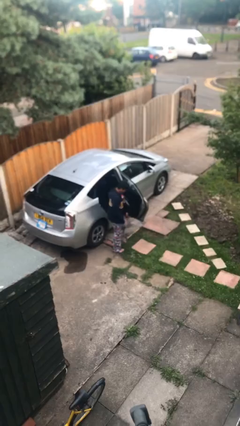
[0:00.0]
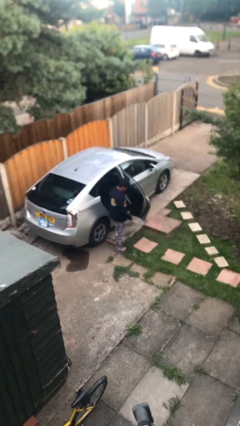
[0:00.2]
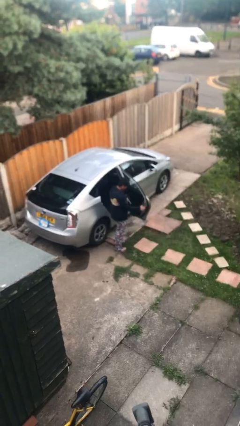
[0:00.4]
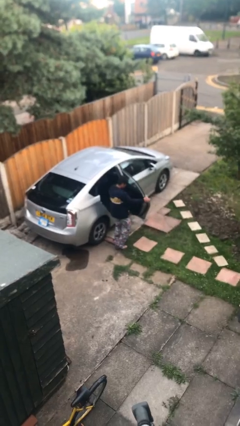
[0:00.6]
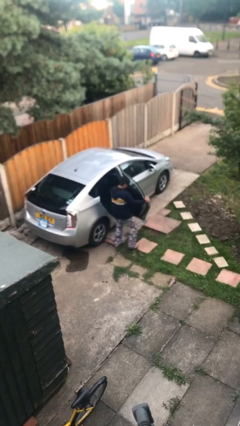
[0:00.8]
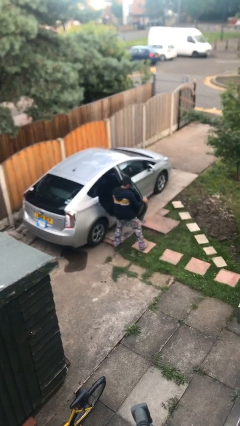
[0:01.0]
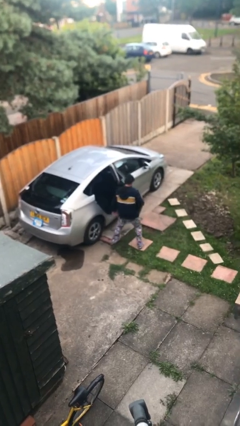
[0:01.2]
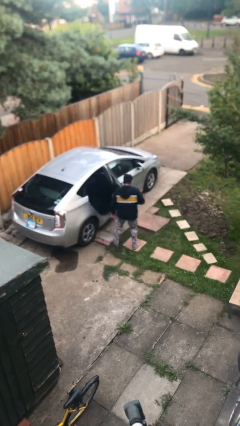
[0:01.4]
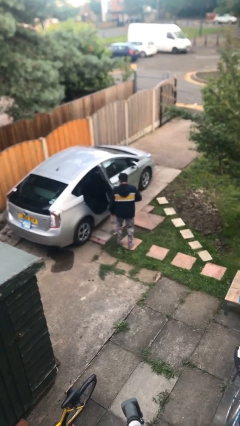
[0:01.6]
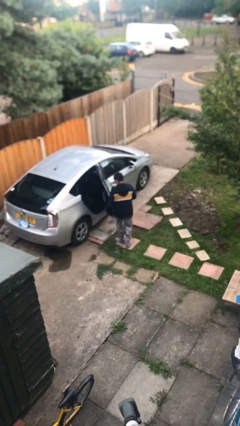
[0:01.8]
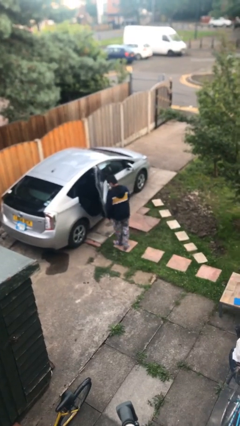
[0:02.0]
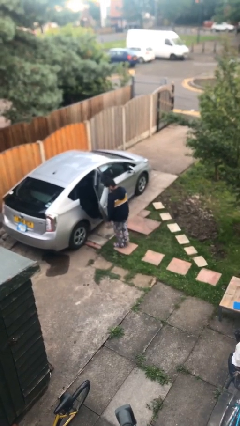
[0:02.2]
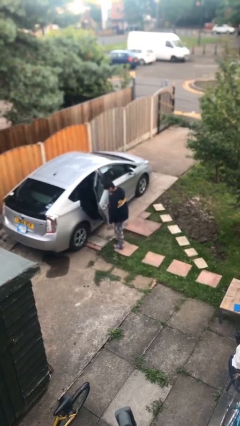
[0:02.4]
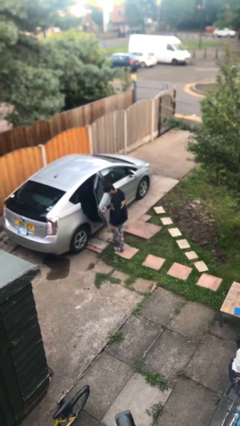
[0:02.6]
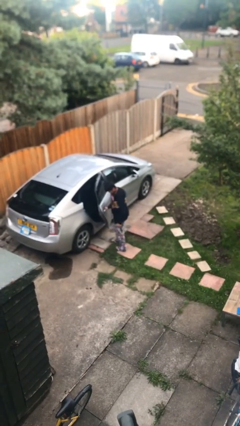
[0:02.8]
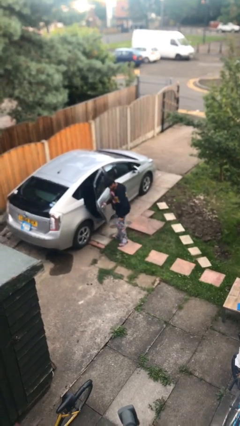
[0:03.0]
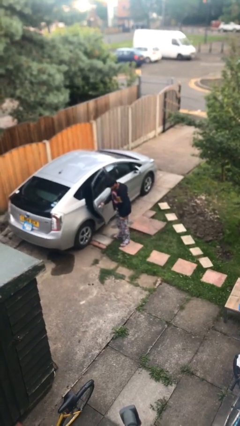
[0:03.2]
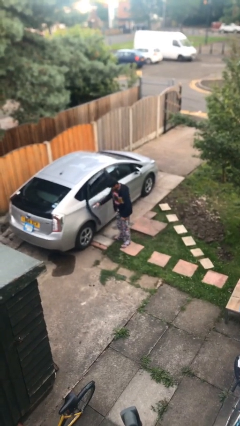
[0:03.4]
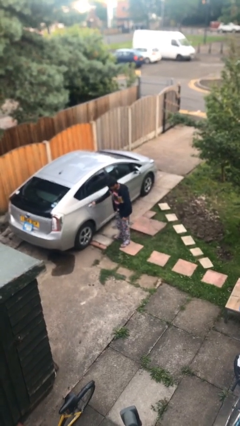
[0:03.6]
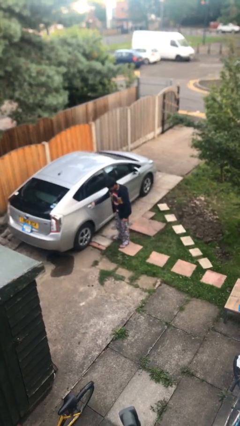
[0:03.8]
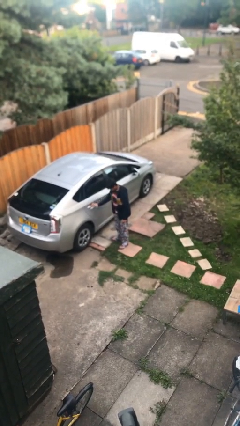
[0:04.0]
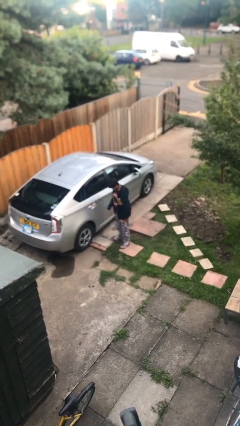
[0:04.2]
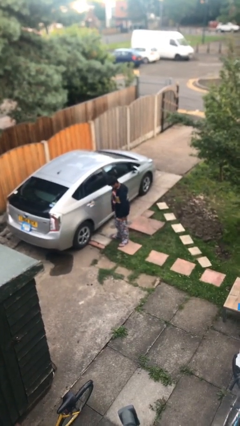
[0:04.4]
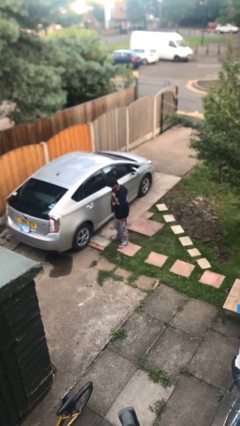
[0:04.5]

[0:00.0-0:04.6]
person closes car door

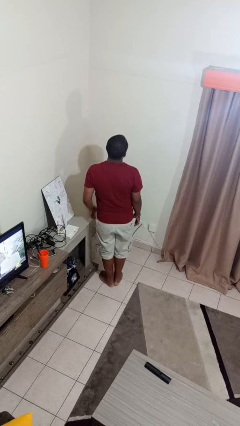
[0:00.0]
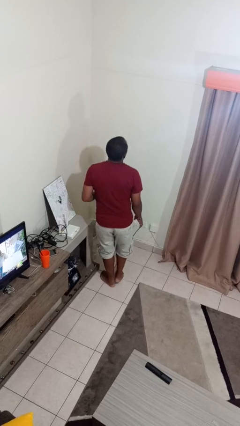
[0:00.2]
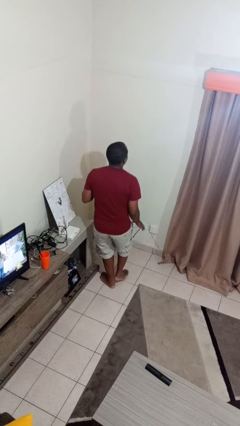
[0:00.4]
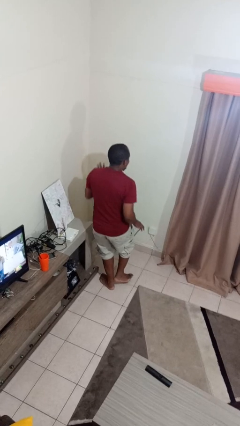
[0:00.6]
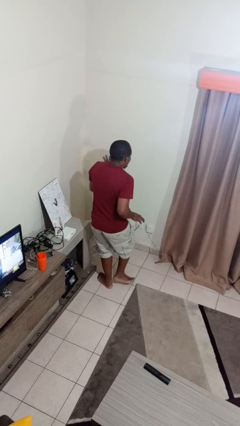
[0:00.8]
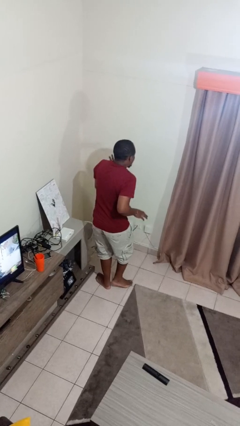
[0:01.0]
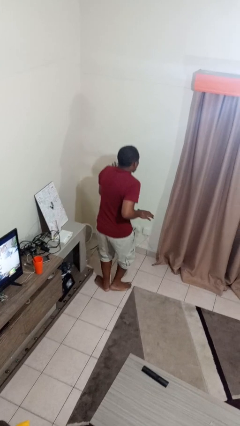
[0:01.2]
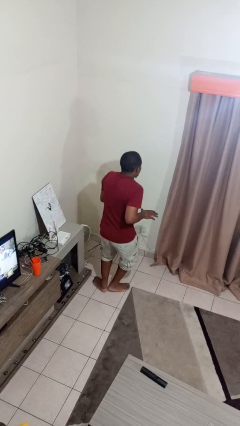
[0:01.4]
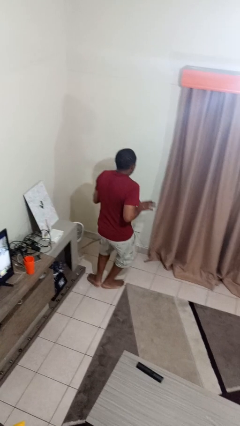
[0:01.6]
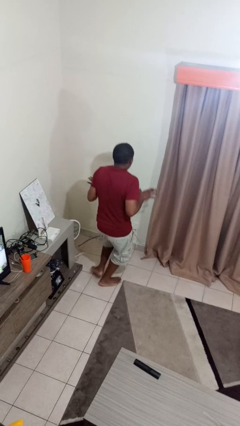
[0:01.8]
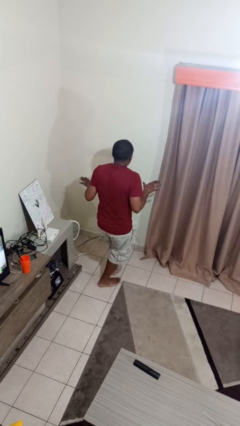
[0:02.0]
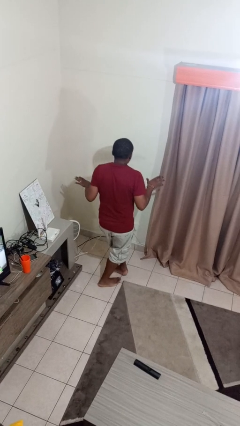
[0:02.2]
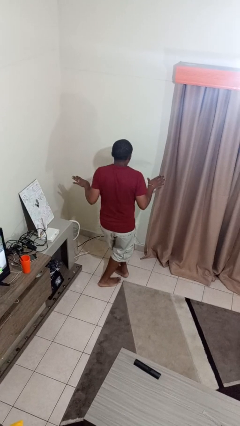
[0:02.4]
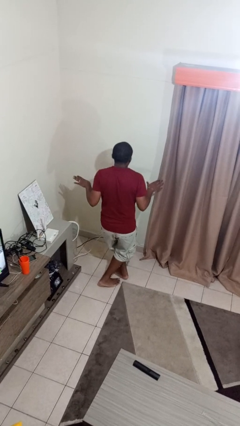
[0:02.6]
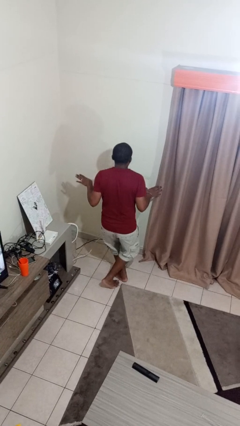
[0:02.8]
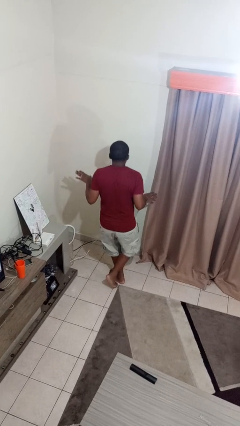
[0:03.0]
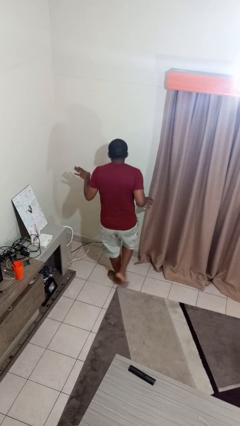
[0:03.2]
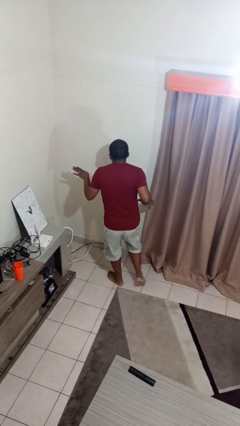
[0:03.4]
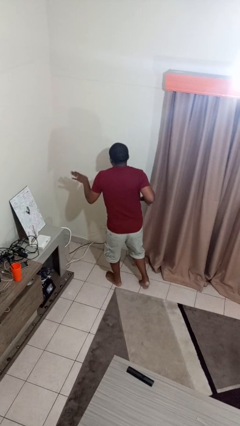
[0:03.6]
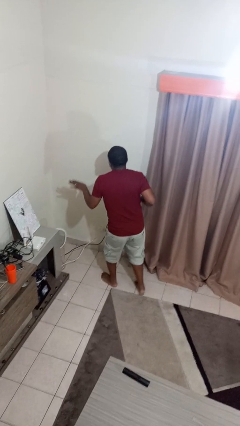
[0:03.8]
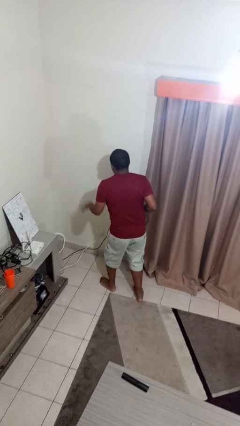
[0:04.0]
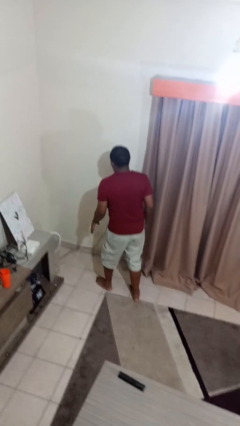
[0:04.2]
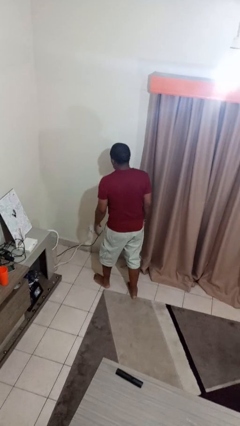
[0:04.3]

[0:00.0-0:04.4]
person walks tiptoe

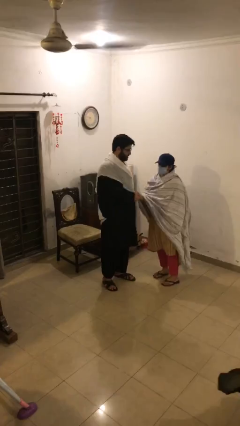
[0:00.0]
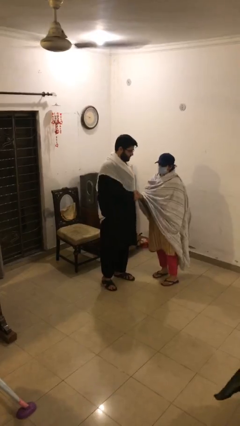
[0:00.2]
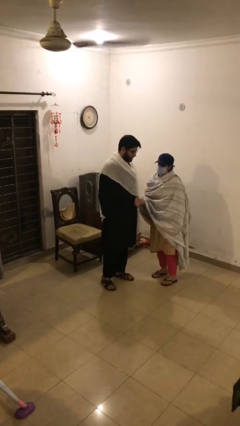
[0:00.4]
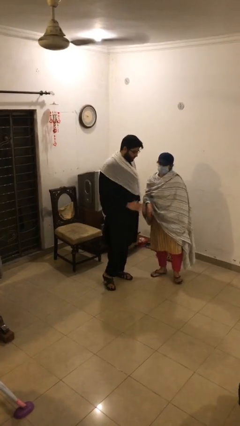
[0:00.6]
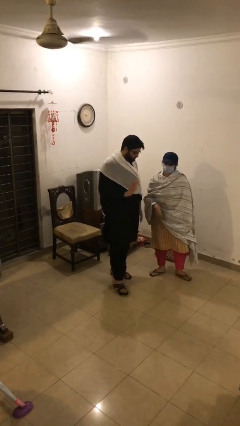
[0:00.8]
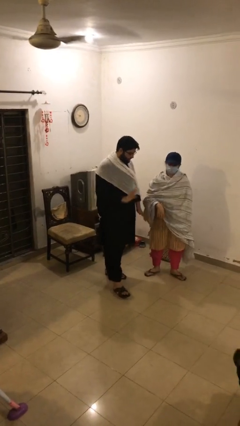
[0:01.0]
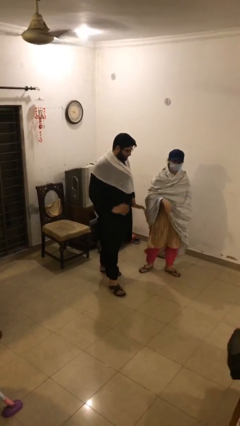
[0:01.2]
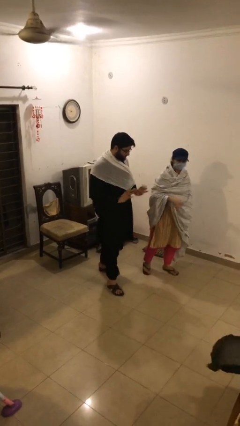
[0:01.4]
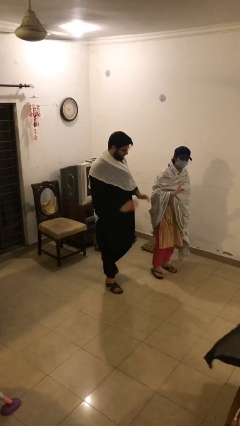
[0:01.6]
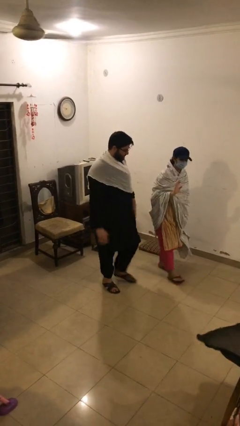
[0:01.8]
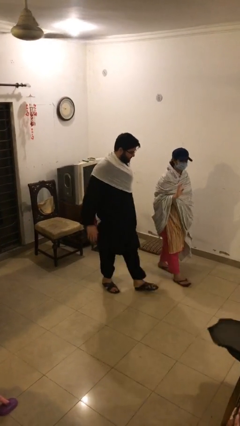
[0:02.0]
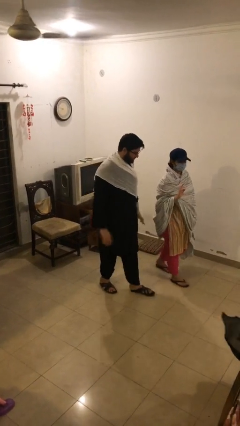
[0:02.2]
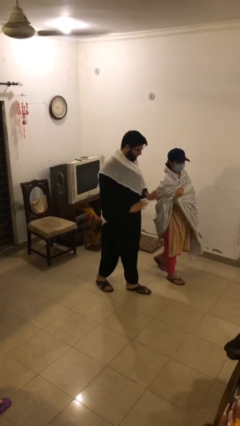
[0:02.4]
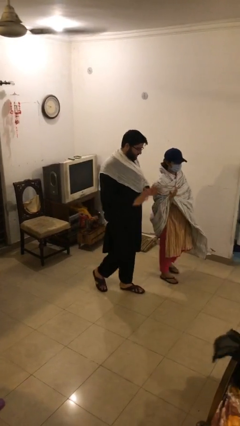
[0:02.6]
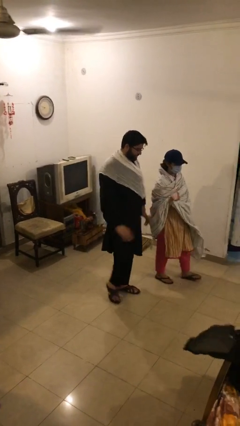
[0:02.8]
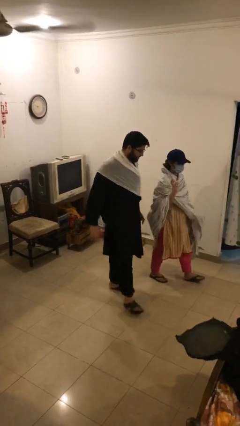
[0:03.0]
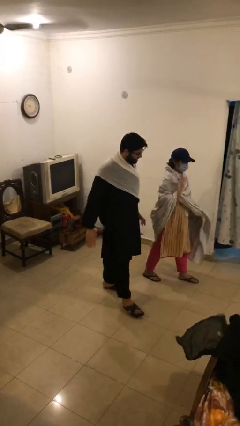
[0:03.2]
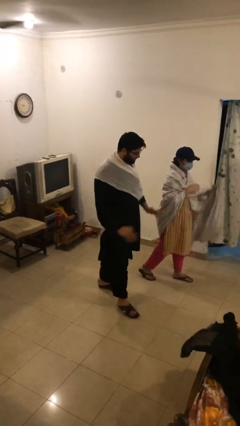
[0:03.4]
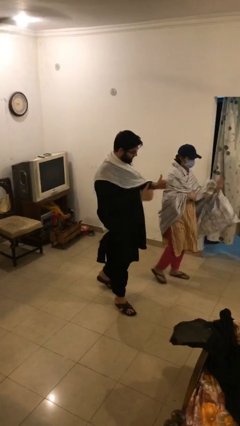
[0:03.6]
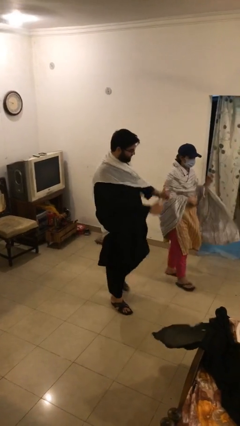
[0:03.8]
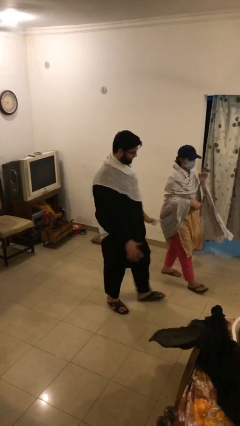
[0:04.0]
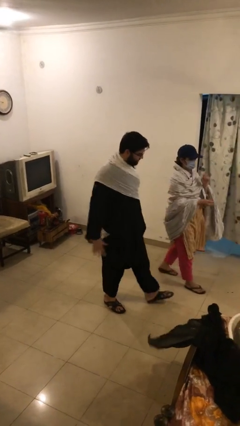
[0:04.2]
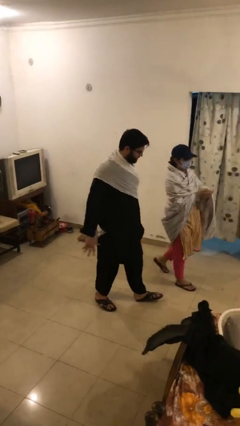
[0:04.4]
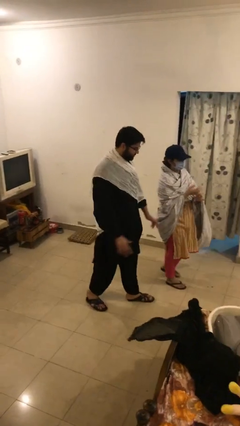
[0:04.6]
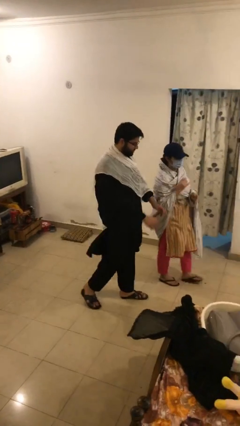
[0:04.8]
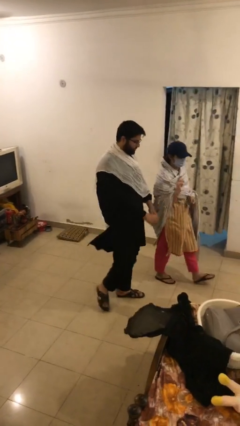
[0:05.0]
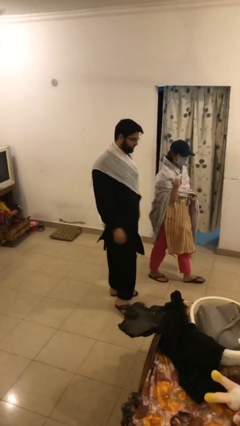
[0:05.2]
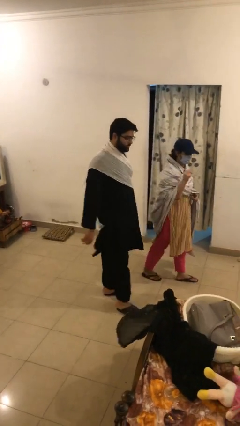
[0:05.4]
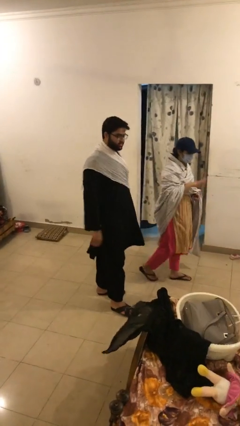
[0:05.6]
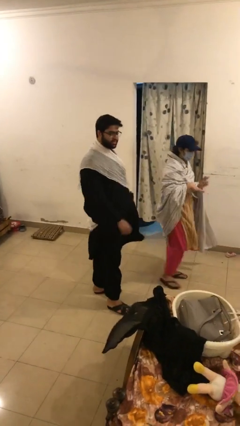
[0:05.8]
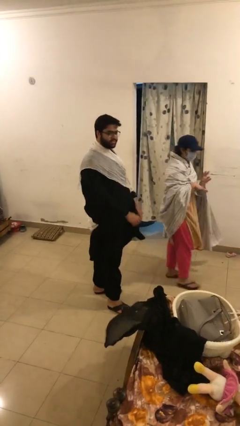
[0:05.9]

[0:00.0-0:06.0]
person talks to person

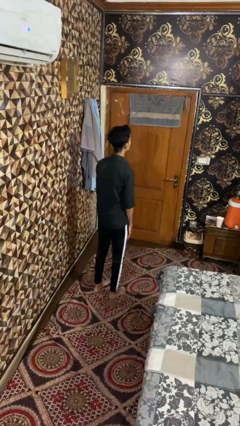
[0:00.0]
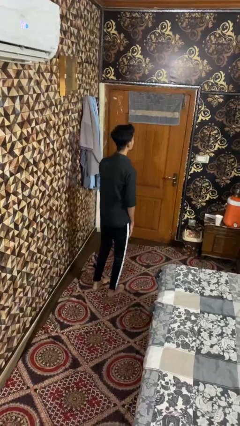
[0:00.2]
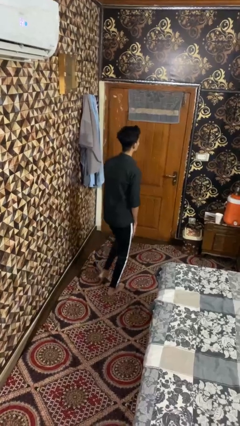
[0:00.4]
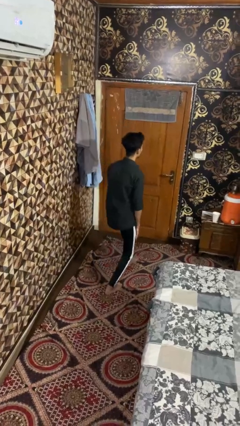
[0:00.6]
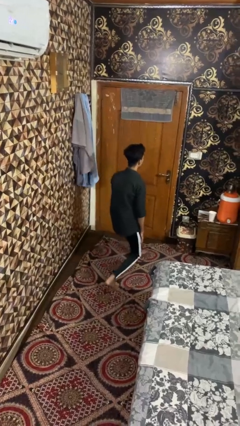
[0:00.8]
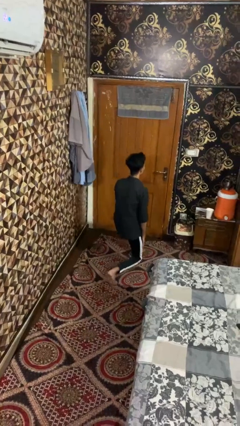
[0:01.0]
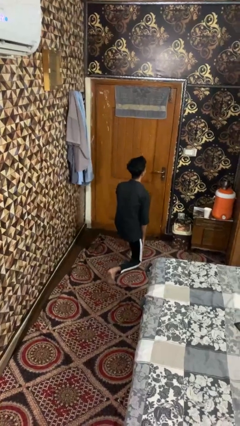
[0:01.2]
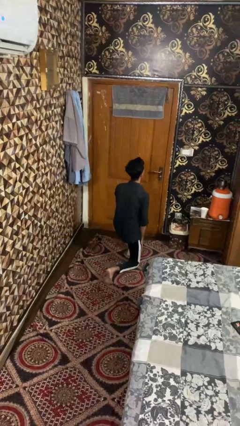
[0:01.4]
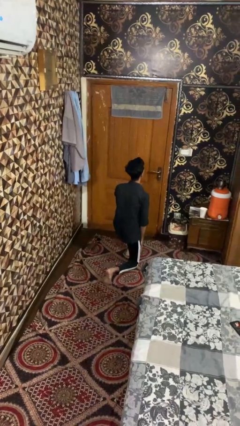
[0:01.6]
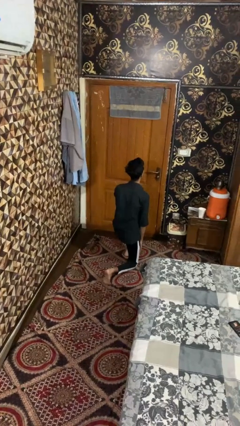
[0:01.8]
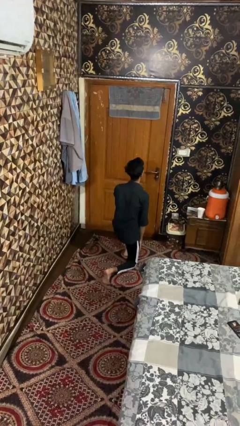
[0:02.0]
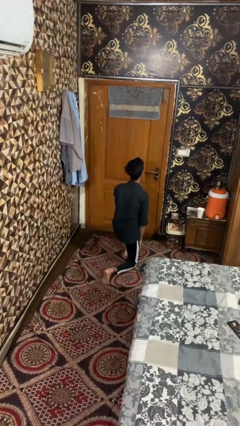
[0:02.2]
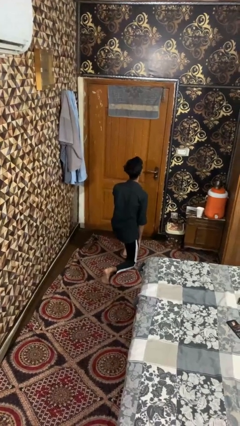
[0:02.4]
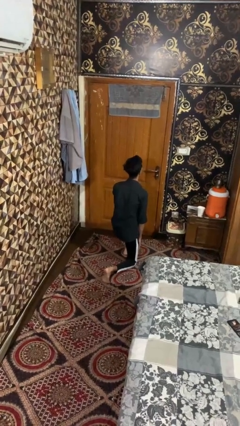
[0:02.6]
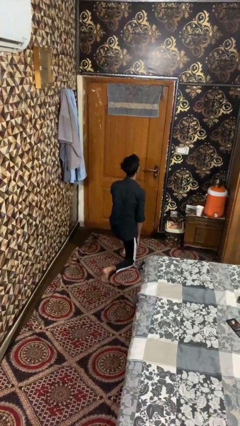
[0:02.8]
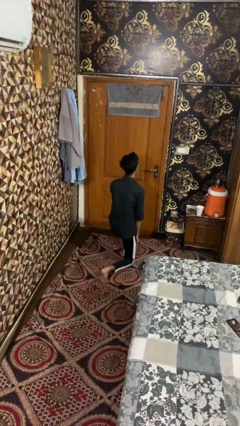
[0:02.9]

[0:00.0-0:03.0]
person exercises with lunges
